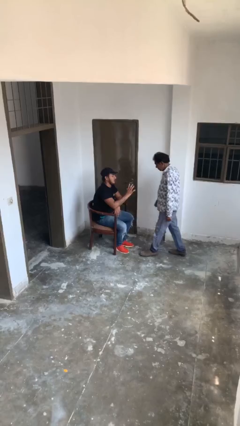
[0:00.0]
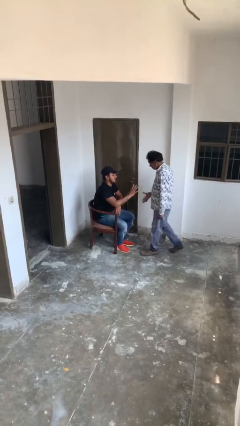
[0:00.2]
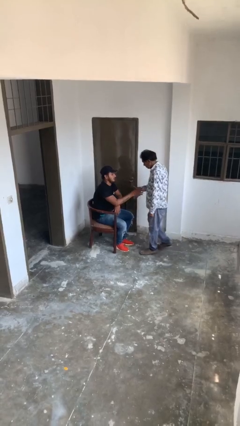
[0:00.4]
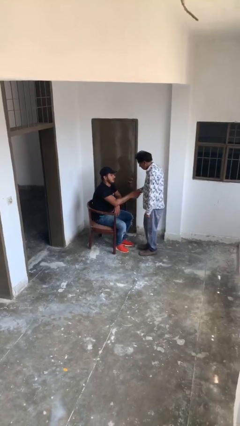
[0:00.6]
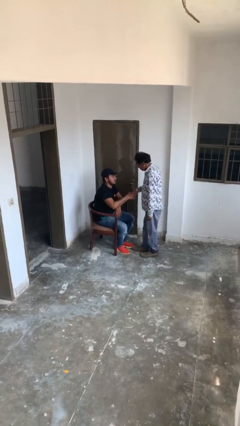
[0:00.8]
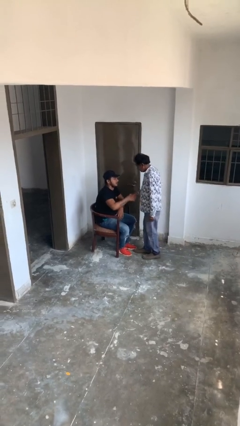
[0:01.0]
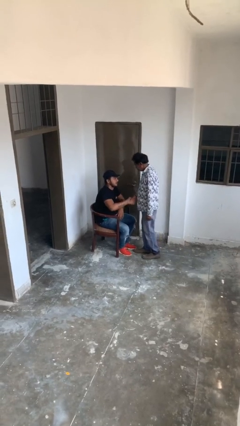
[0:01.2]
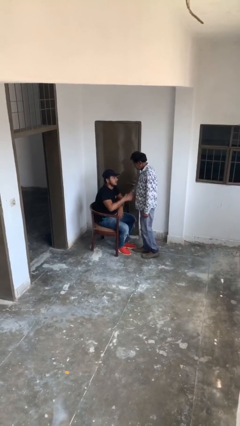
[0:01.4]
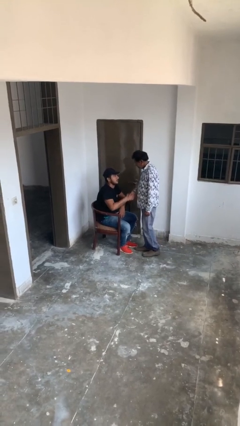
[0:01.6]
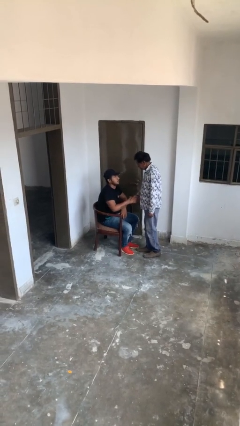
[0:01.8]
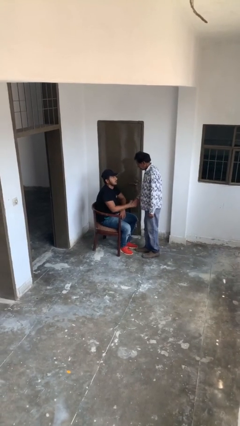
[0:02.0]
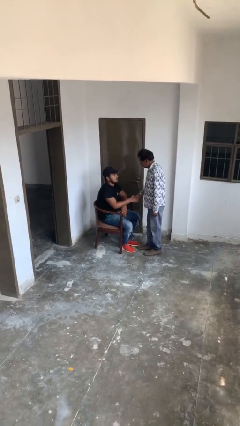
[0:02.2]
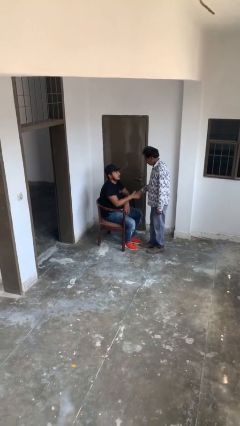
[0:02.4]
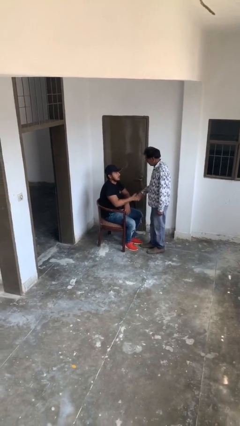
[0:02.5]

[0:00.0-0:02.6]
person shakes hand

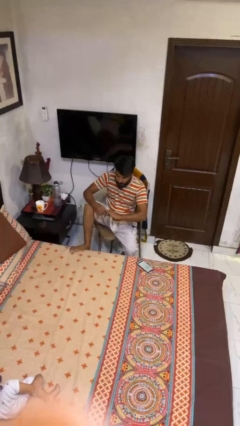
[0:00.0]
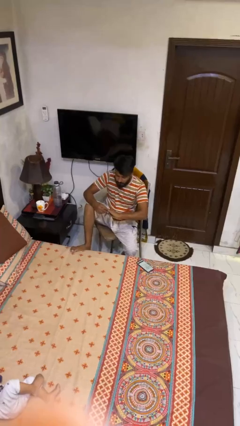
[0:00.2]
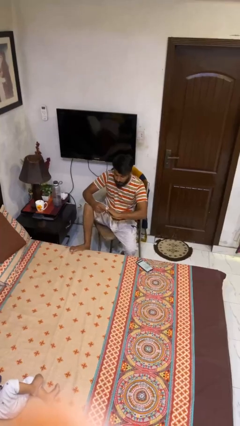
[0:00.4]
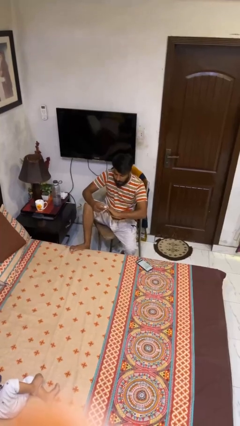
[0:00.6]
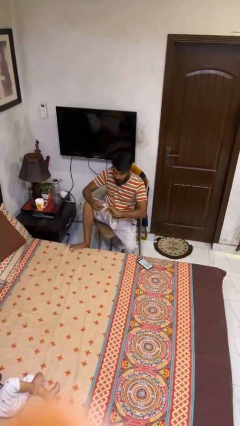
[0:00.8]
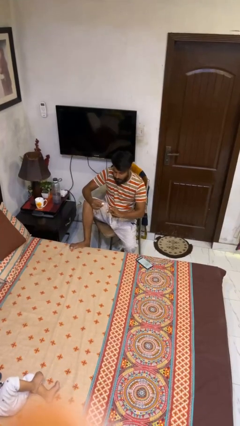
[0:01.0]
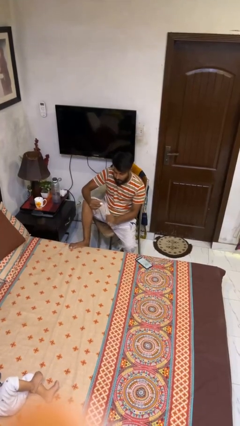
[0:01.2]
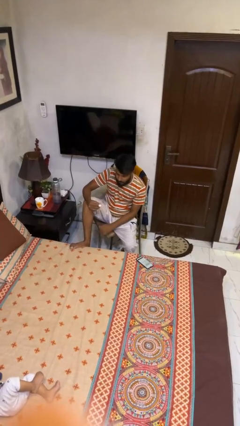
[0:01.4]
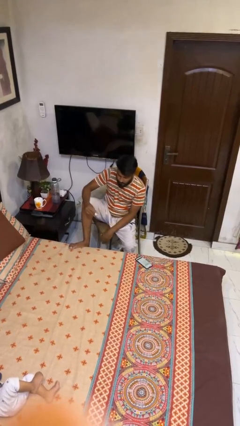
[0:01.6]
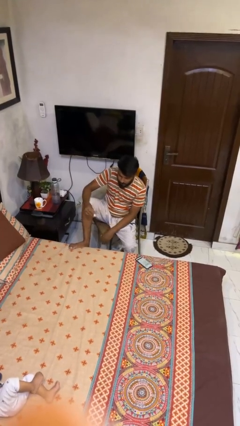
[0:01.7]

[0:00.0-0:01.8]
person takes off ring

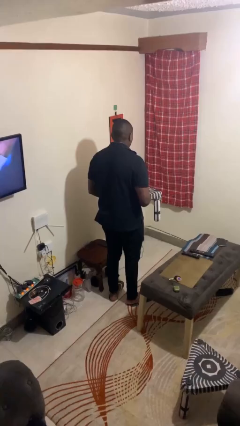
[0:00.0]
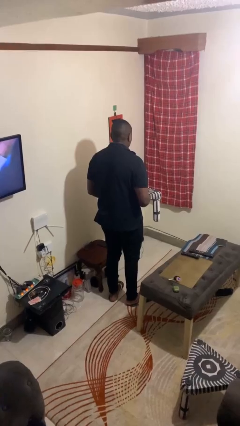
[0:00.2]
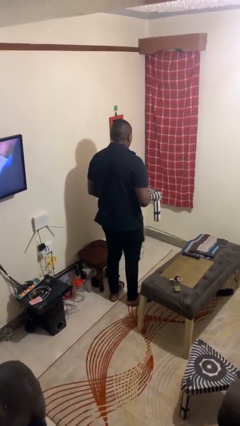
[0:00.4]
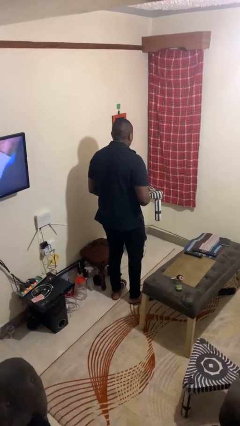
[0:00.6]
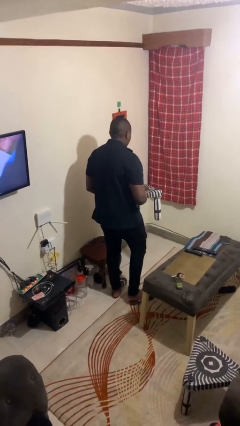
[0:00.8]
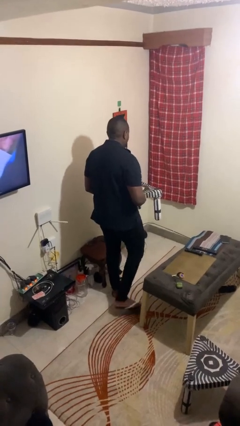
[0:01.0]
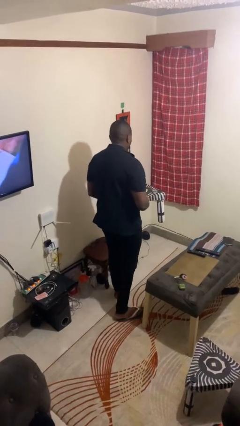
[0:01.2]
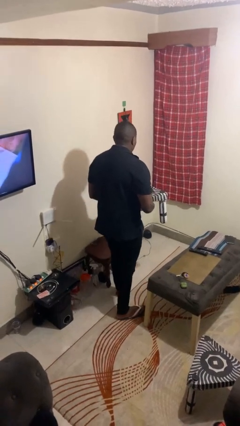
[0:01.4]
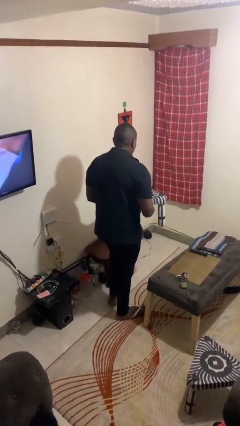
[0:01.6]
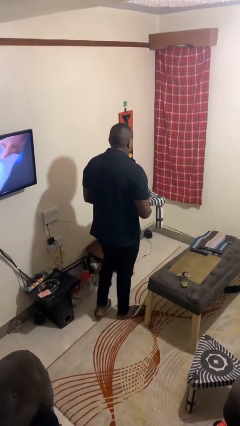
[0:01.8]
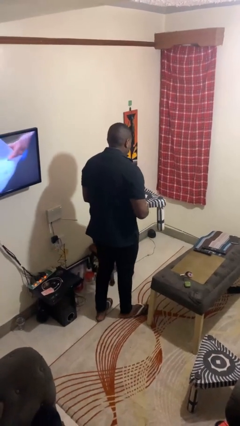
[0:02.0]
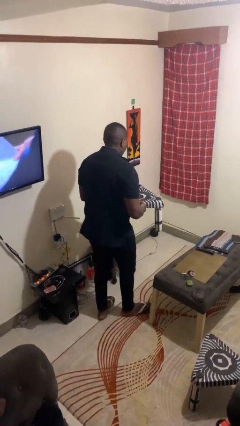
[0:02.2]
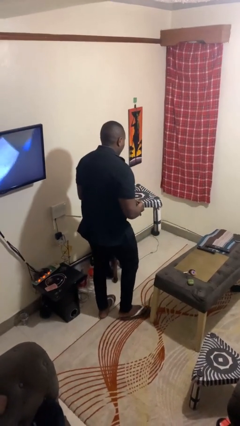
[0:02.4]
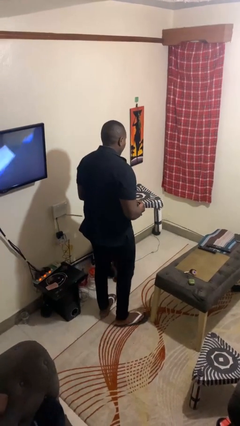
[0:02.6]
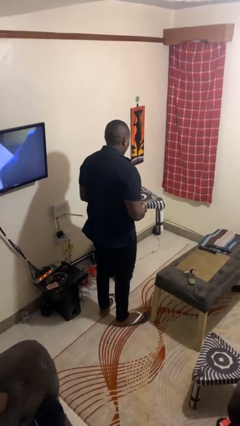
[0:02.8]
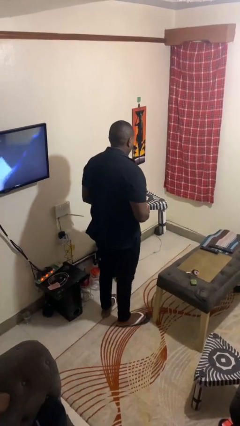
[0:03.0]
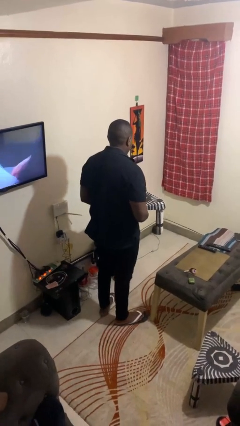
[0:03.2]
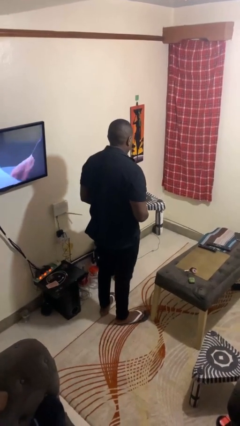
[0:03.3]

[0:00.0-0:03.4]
person carries groceries

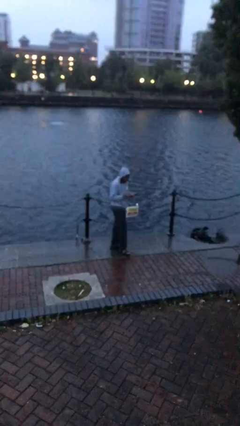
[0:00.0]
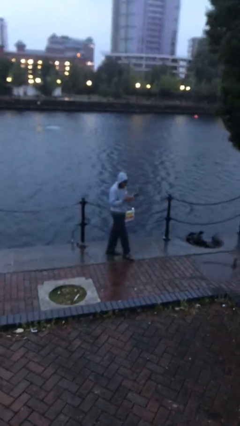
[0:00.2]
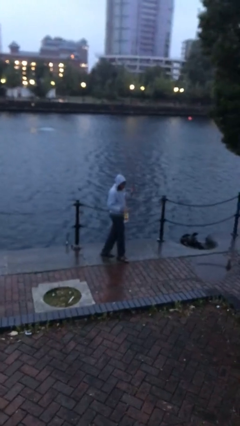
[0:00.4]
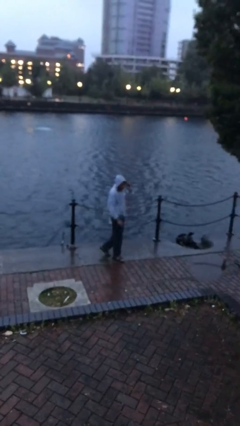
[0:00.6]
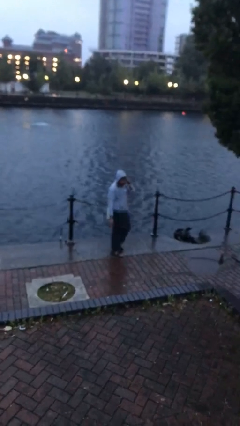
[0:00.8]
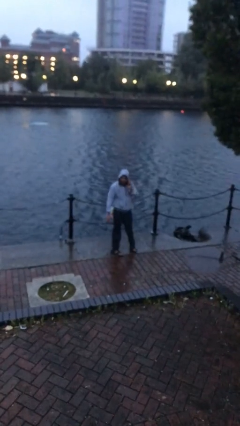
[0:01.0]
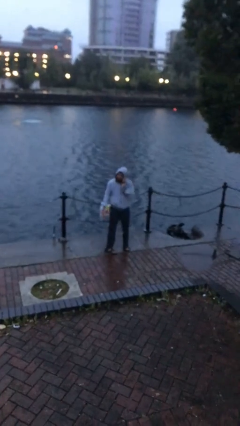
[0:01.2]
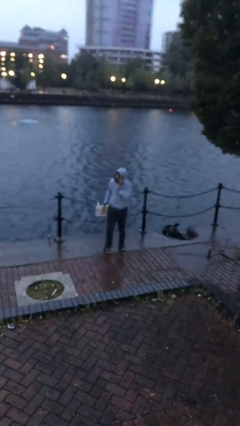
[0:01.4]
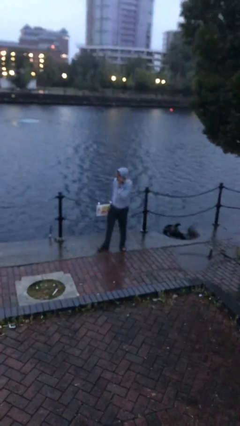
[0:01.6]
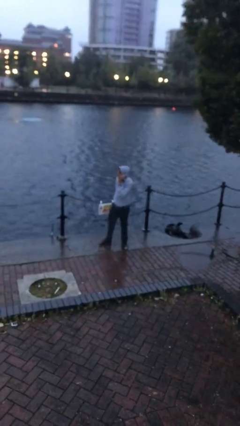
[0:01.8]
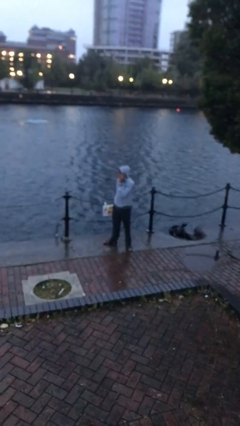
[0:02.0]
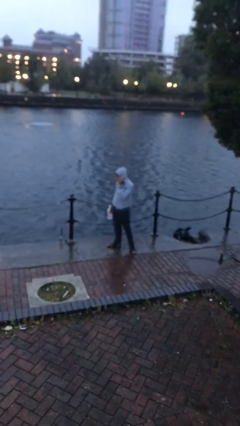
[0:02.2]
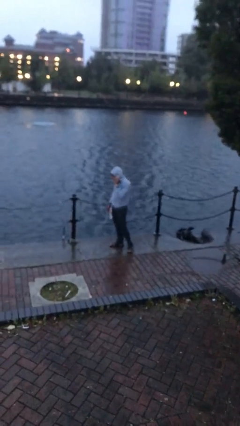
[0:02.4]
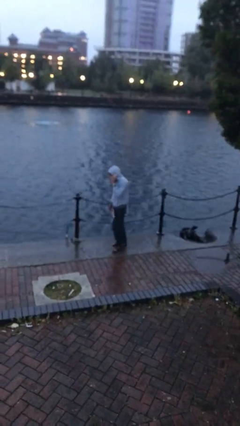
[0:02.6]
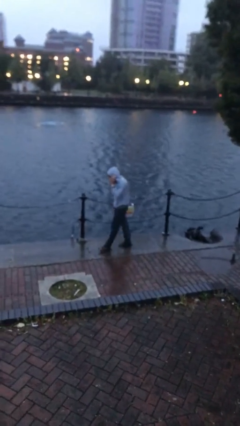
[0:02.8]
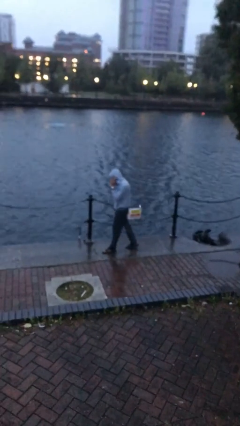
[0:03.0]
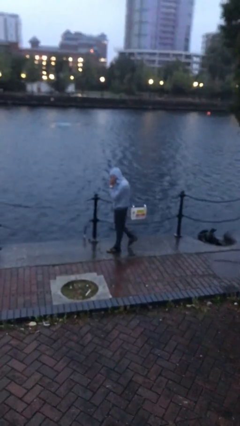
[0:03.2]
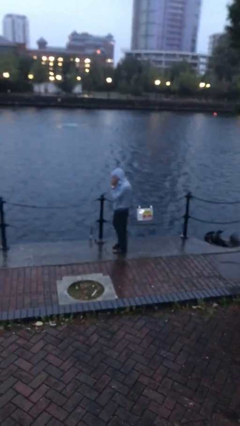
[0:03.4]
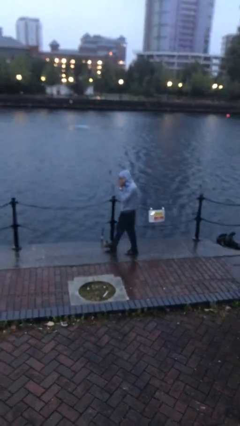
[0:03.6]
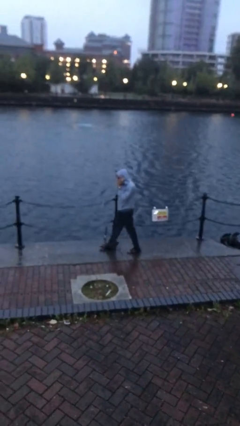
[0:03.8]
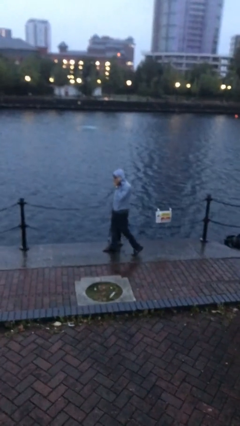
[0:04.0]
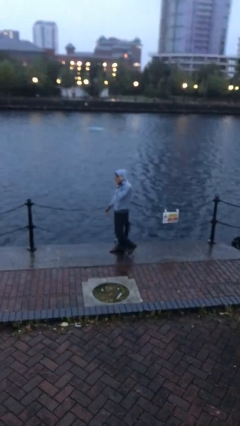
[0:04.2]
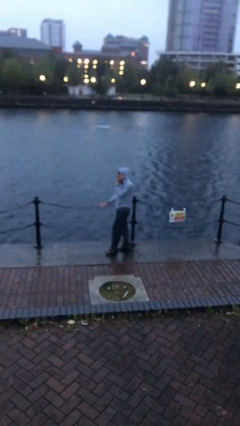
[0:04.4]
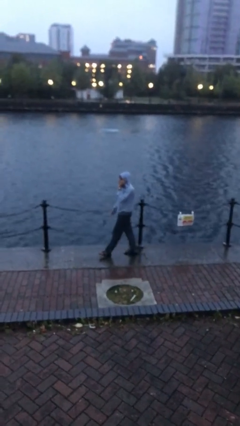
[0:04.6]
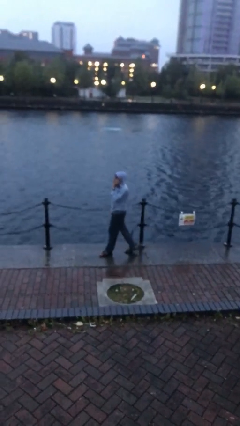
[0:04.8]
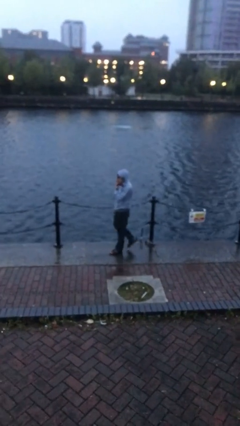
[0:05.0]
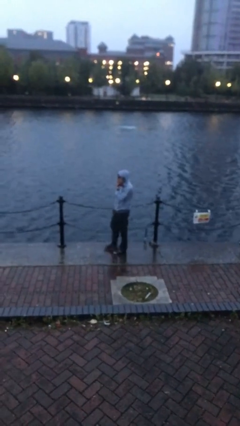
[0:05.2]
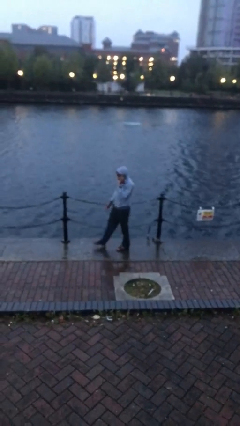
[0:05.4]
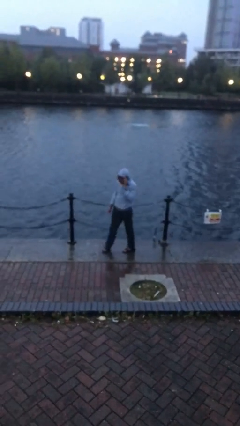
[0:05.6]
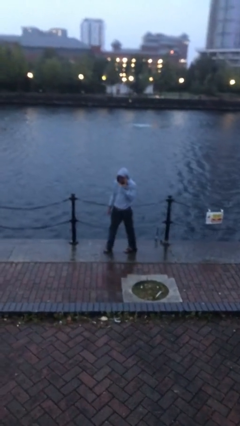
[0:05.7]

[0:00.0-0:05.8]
person talks on phone

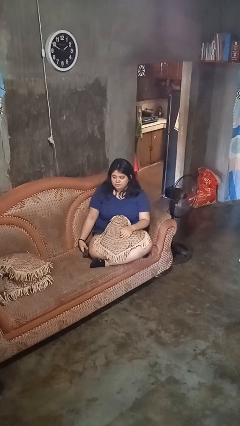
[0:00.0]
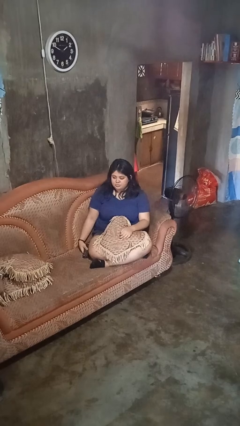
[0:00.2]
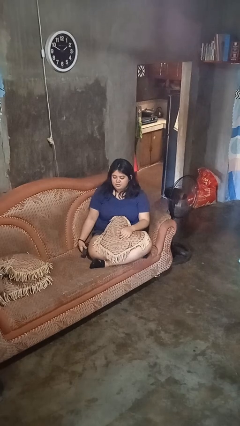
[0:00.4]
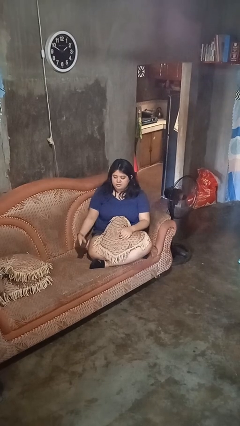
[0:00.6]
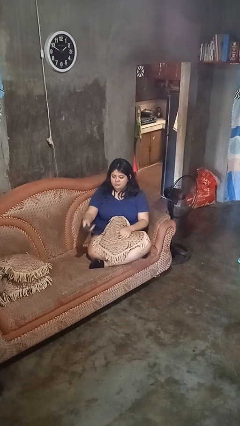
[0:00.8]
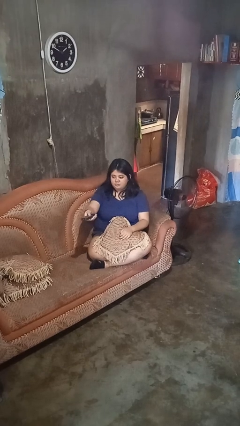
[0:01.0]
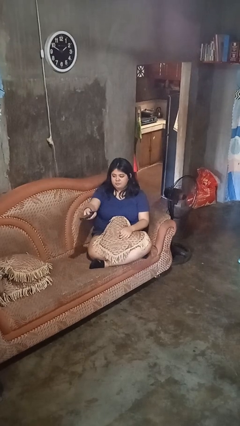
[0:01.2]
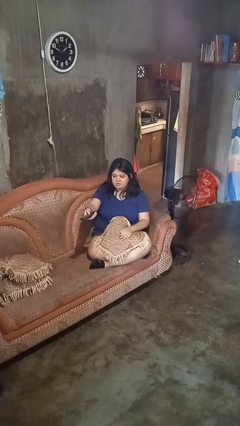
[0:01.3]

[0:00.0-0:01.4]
person uses television remote

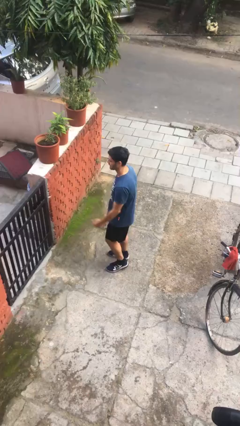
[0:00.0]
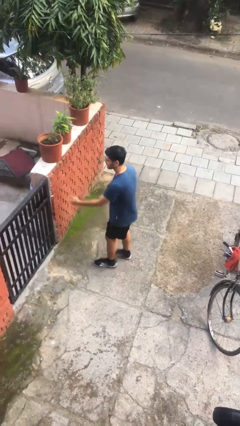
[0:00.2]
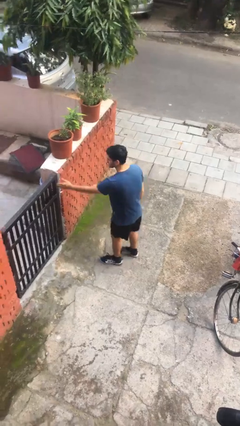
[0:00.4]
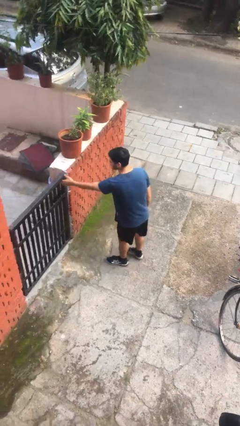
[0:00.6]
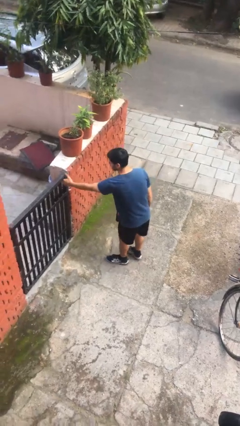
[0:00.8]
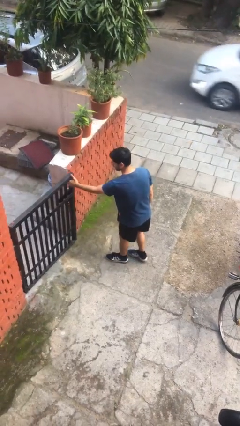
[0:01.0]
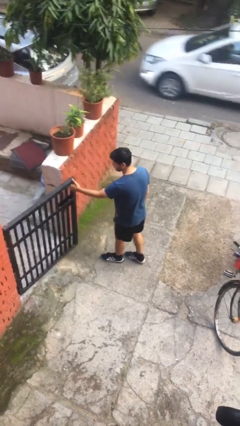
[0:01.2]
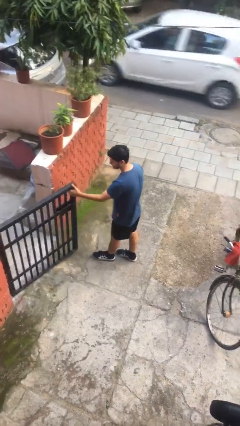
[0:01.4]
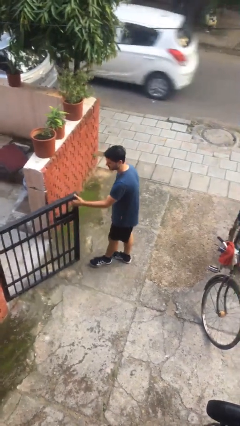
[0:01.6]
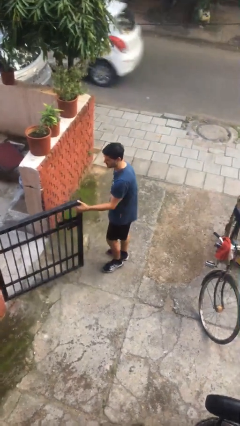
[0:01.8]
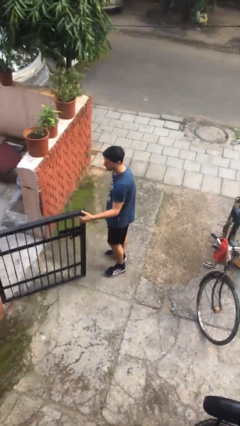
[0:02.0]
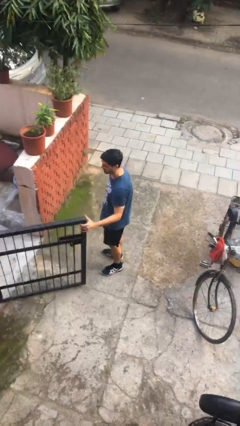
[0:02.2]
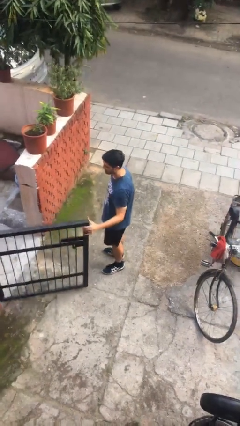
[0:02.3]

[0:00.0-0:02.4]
person opens gate
